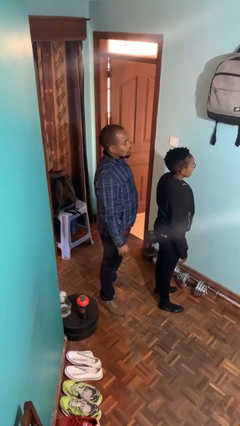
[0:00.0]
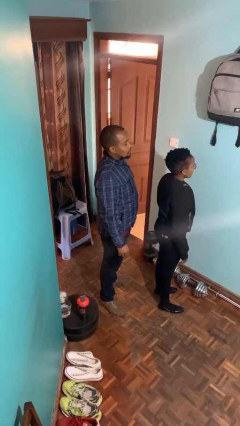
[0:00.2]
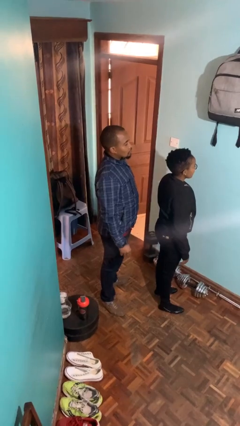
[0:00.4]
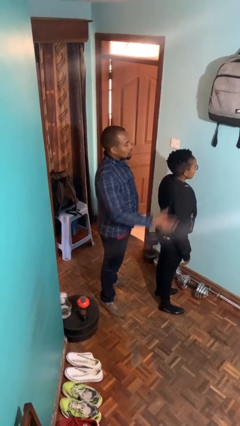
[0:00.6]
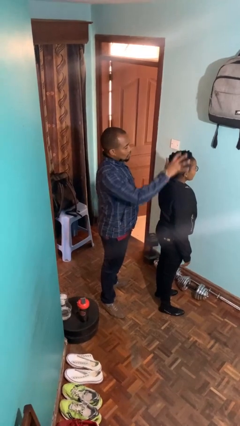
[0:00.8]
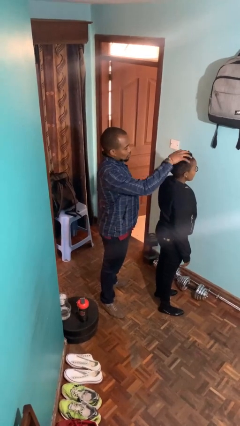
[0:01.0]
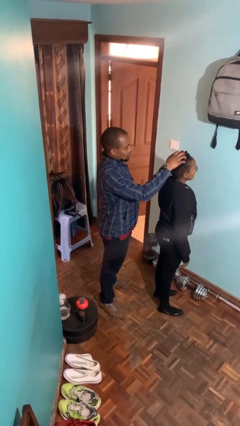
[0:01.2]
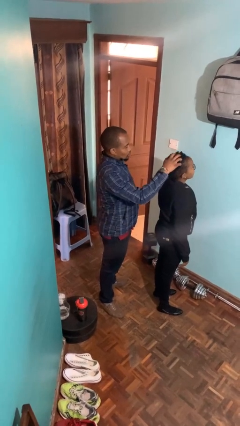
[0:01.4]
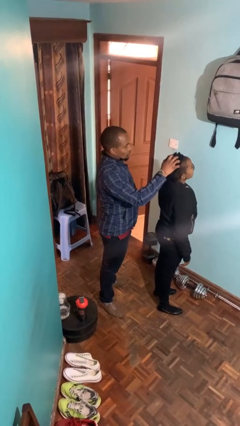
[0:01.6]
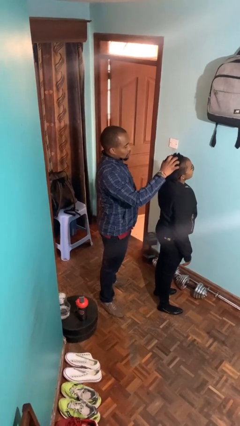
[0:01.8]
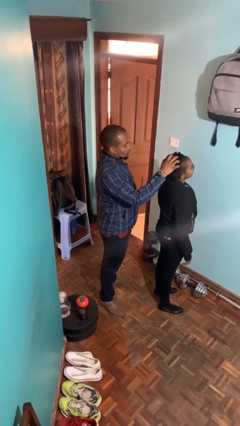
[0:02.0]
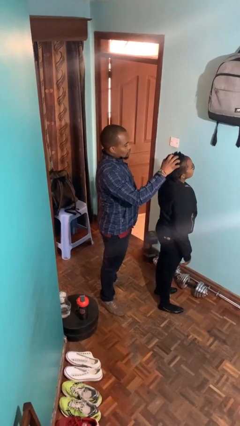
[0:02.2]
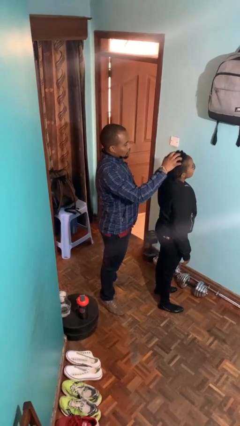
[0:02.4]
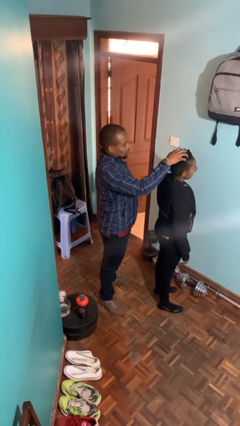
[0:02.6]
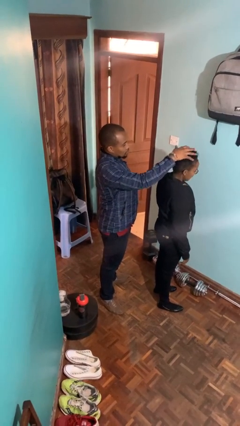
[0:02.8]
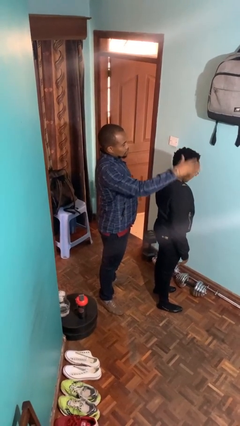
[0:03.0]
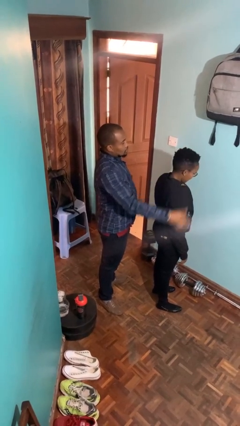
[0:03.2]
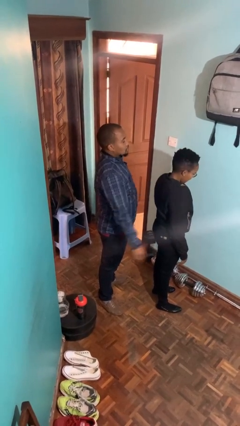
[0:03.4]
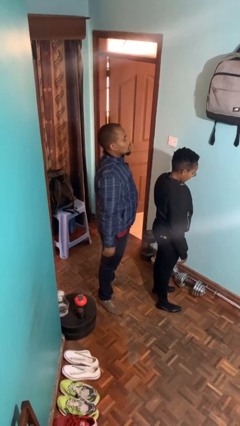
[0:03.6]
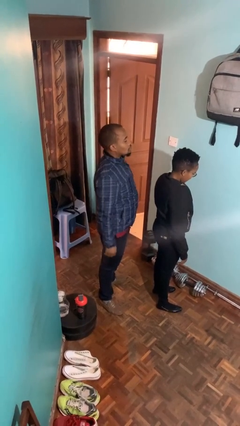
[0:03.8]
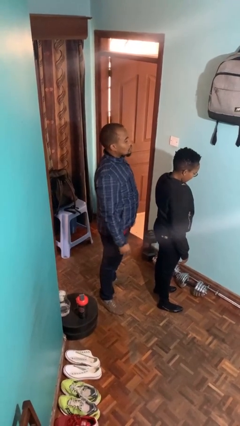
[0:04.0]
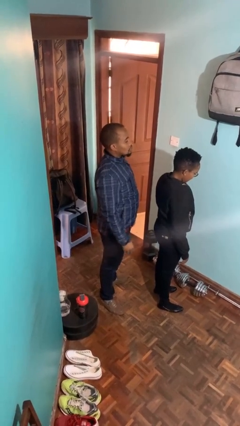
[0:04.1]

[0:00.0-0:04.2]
person grabs person by hair

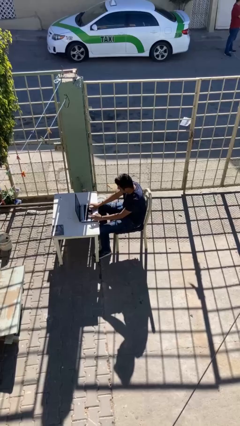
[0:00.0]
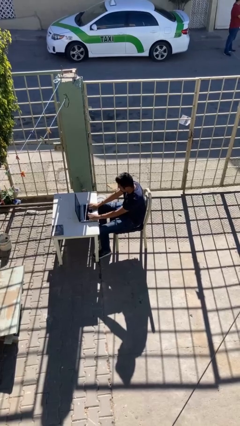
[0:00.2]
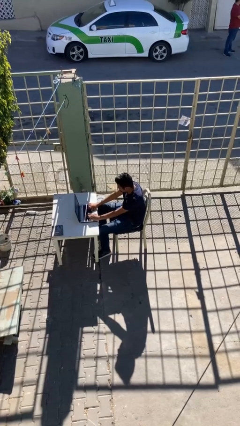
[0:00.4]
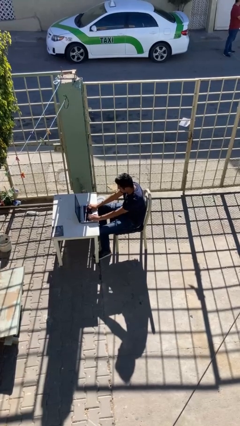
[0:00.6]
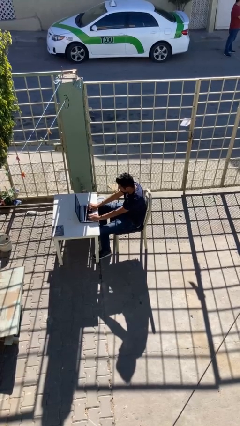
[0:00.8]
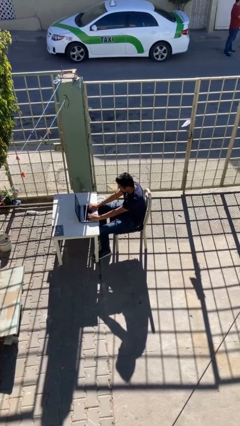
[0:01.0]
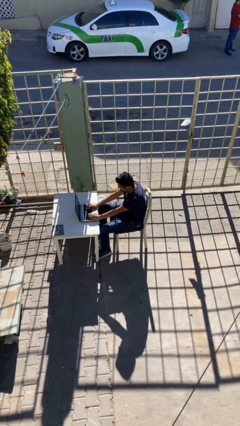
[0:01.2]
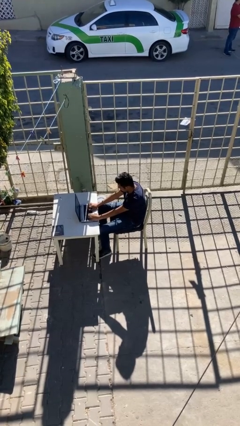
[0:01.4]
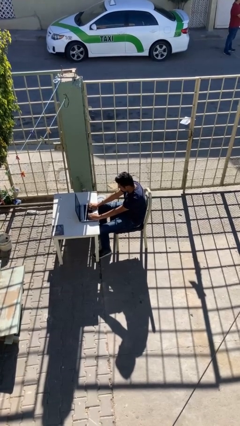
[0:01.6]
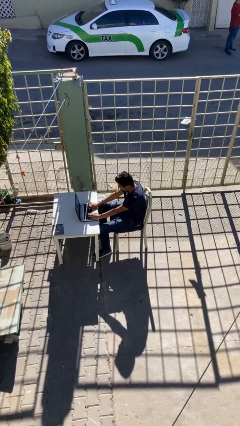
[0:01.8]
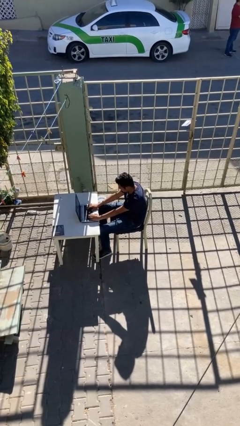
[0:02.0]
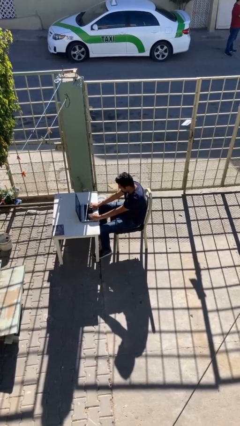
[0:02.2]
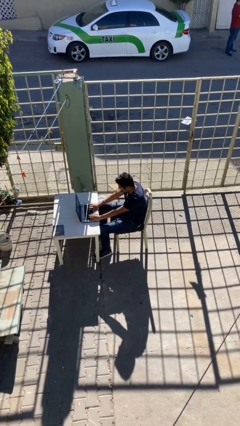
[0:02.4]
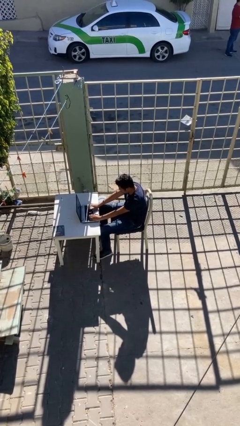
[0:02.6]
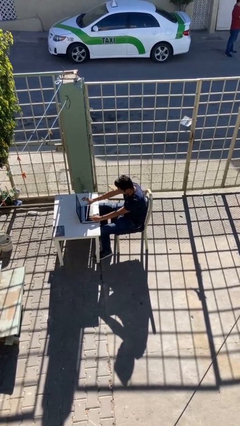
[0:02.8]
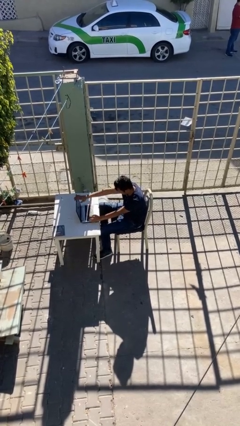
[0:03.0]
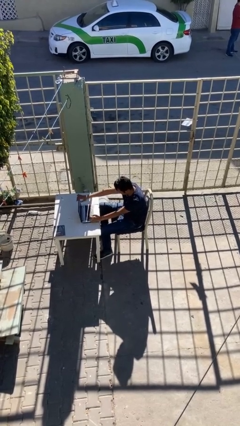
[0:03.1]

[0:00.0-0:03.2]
person interacts with laptop

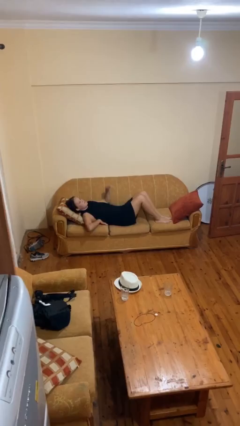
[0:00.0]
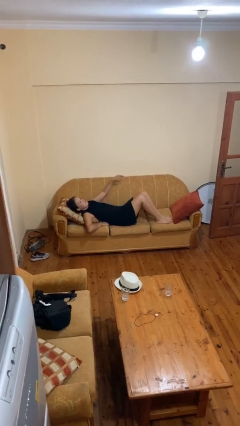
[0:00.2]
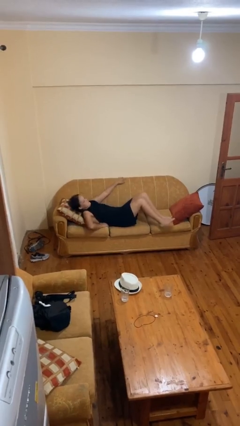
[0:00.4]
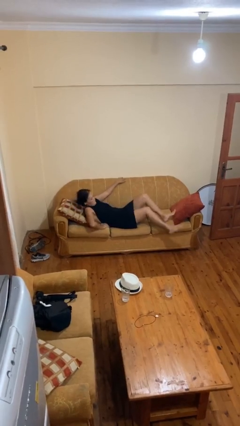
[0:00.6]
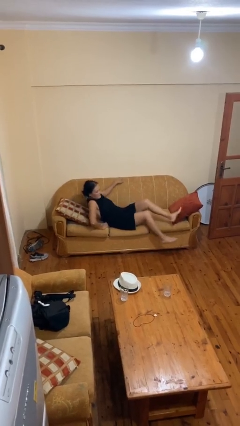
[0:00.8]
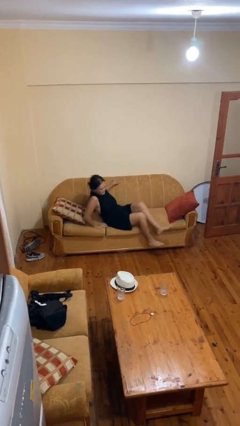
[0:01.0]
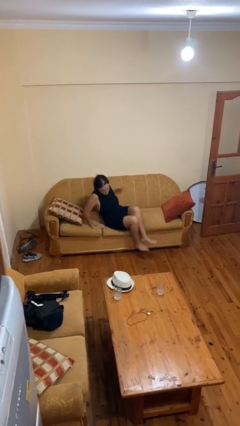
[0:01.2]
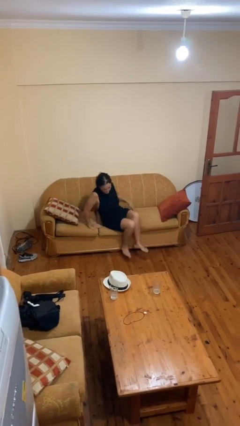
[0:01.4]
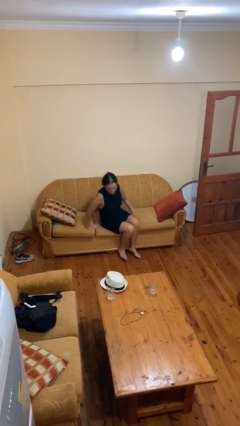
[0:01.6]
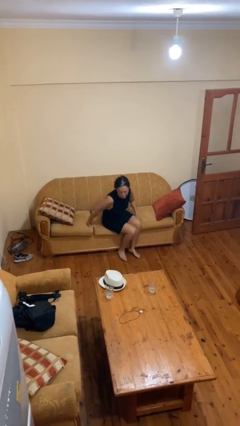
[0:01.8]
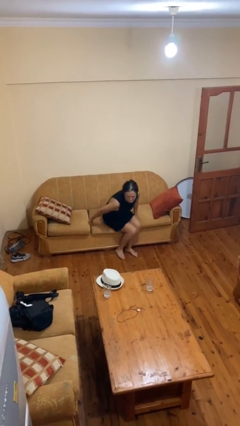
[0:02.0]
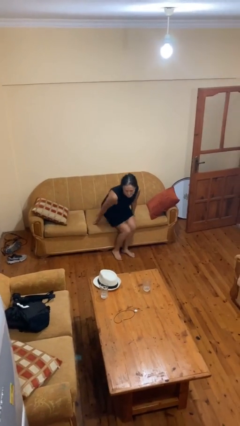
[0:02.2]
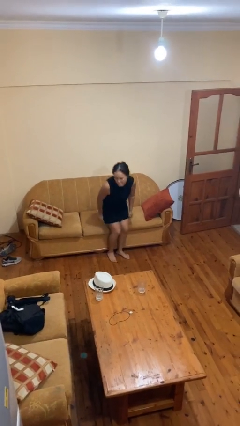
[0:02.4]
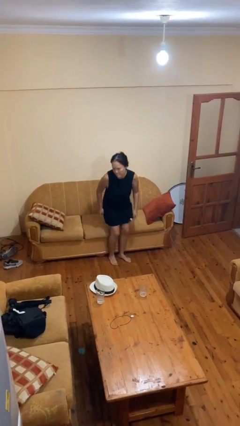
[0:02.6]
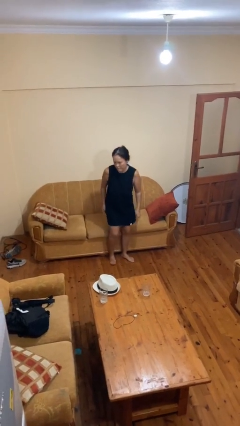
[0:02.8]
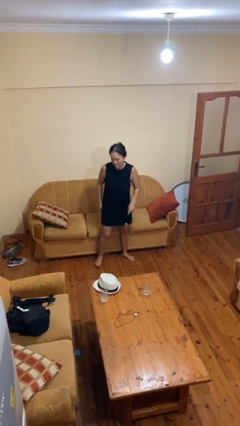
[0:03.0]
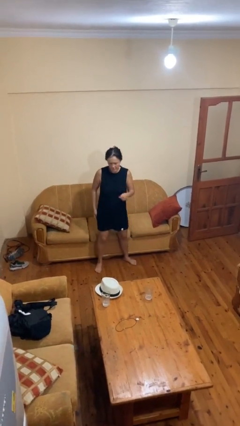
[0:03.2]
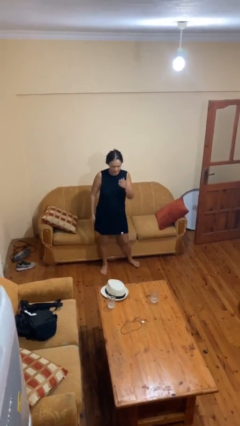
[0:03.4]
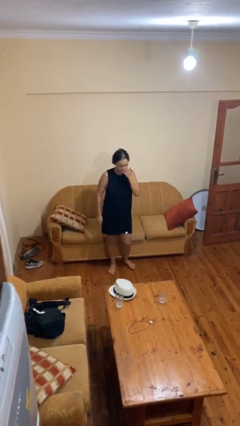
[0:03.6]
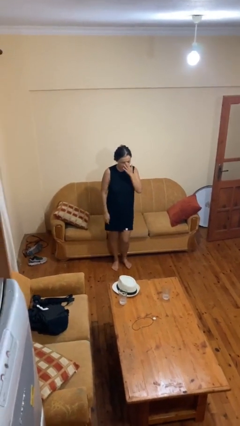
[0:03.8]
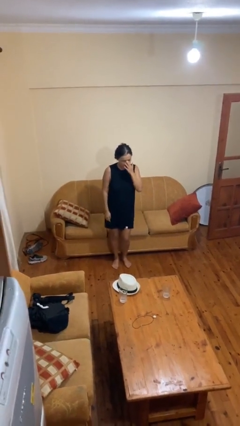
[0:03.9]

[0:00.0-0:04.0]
person stands up

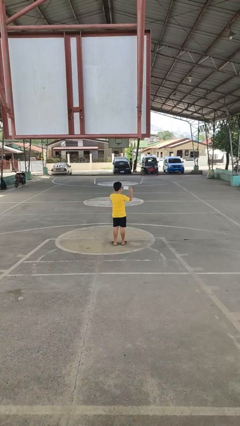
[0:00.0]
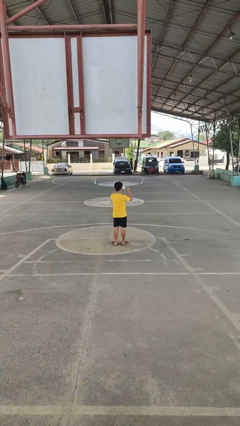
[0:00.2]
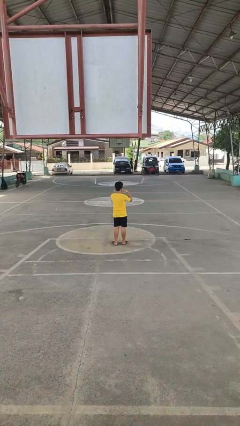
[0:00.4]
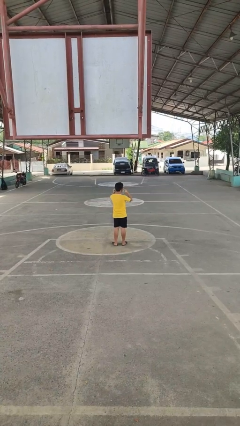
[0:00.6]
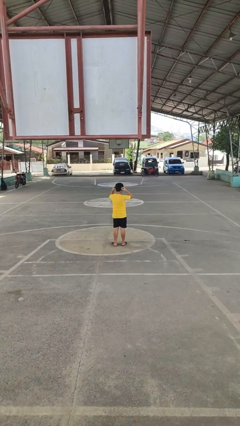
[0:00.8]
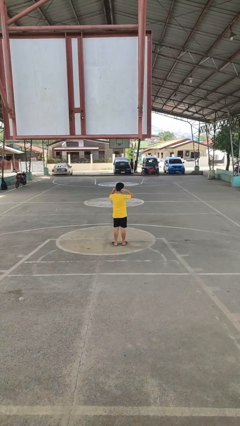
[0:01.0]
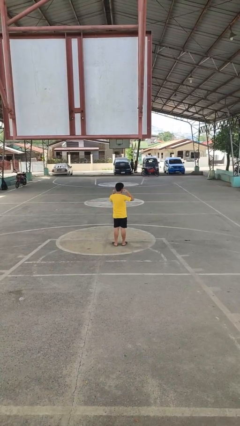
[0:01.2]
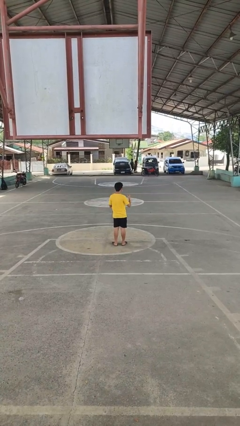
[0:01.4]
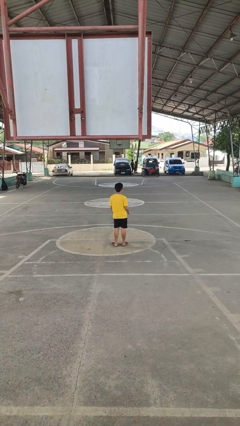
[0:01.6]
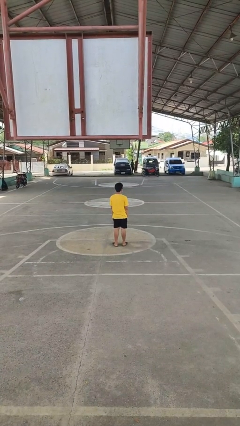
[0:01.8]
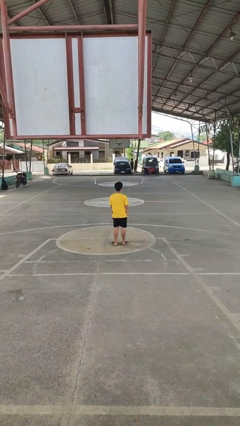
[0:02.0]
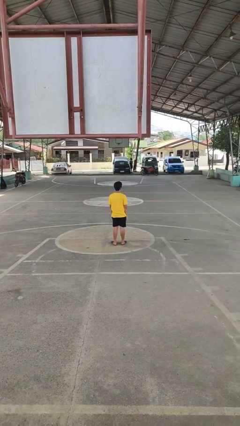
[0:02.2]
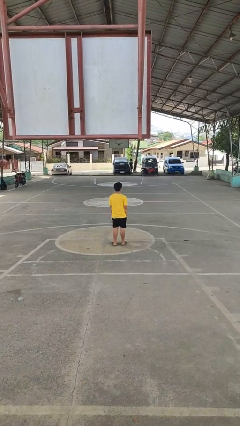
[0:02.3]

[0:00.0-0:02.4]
person puts on facemask

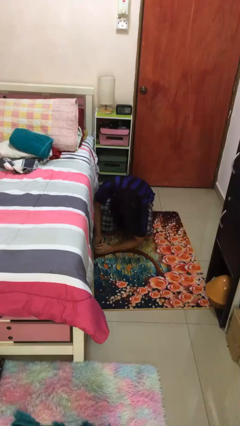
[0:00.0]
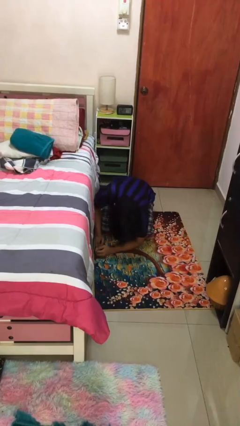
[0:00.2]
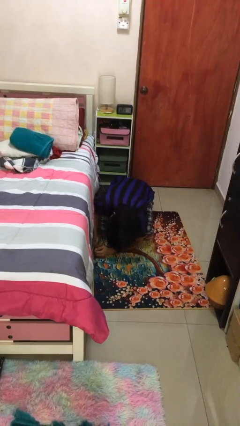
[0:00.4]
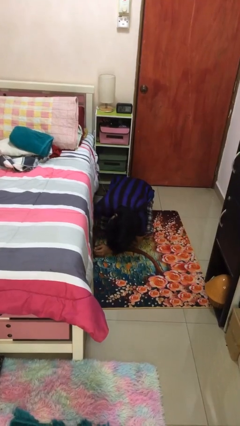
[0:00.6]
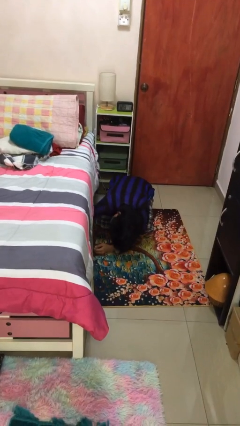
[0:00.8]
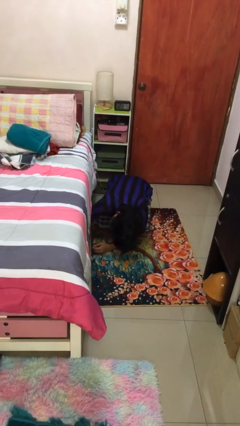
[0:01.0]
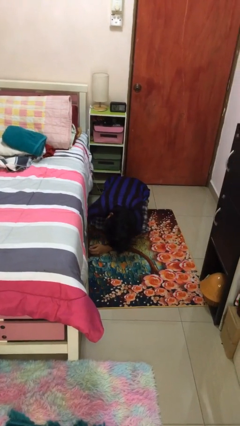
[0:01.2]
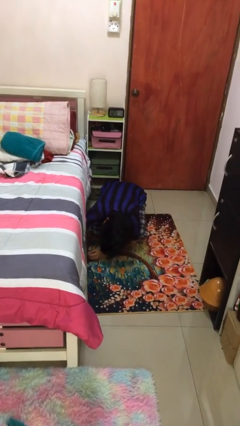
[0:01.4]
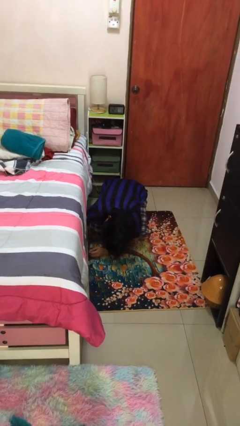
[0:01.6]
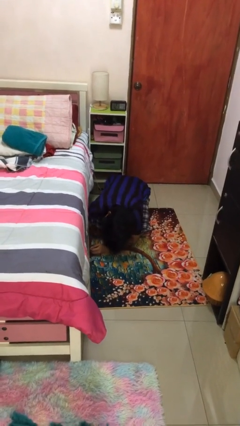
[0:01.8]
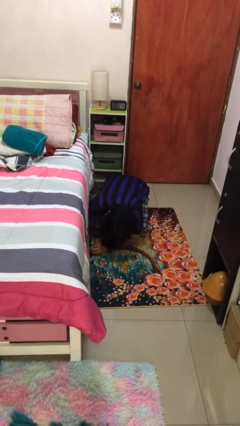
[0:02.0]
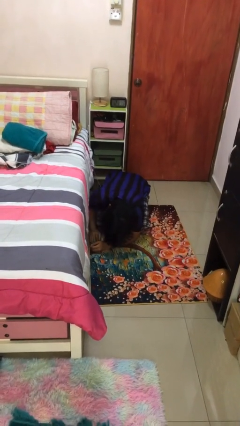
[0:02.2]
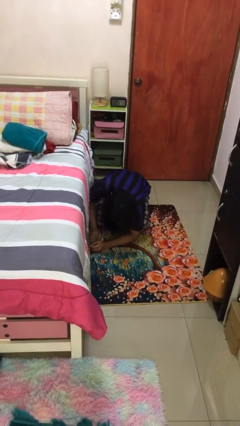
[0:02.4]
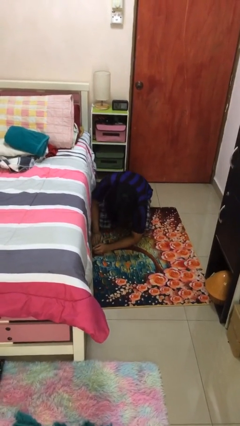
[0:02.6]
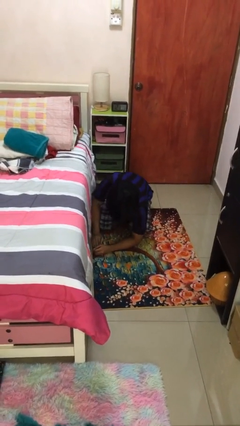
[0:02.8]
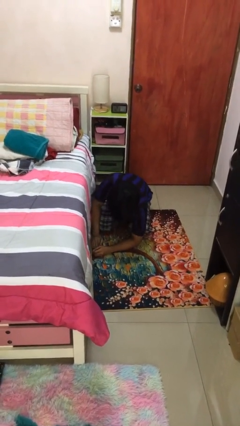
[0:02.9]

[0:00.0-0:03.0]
person searches under bed

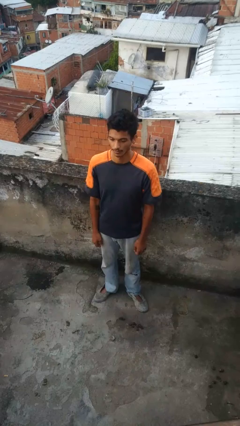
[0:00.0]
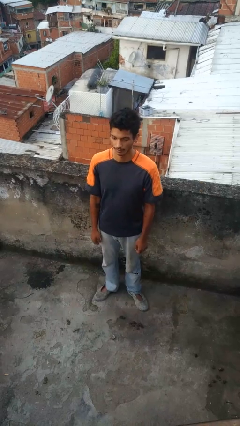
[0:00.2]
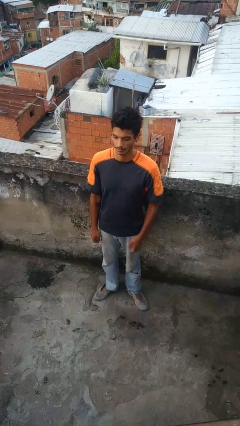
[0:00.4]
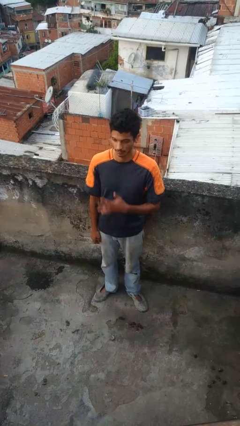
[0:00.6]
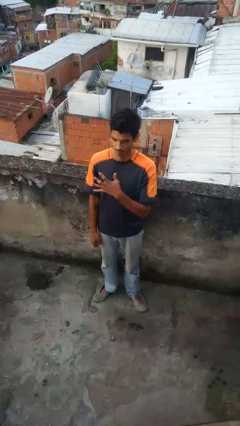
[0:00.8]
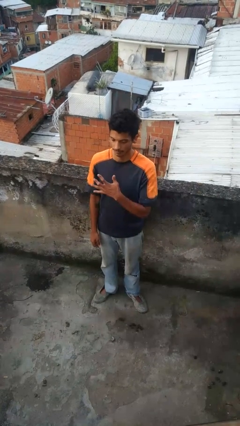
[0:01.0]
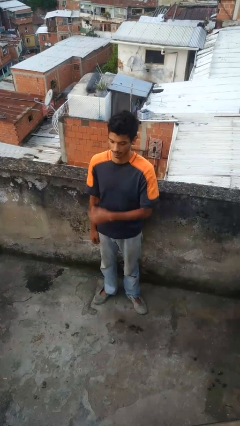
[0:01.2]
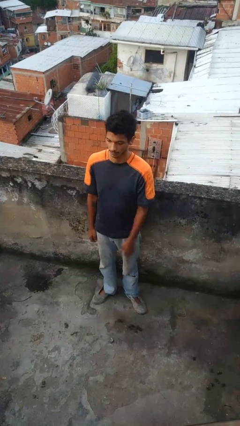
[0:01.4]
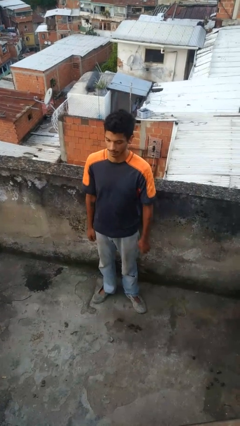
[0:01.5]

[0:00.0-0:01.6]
person gestures number five
